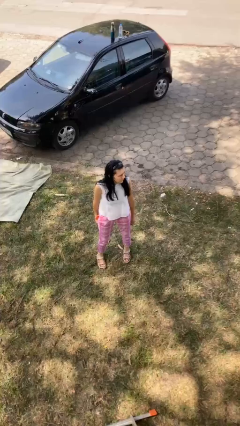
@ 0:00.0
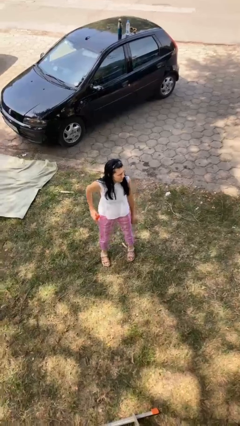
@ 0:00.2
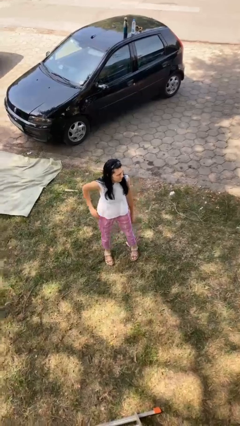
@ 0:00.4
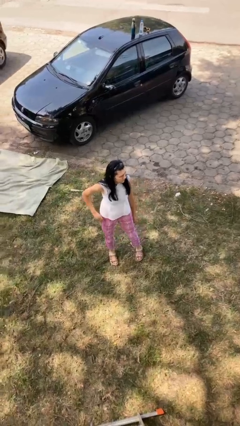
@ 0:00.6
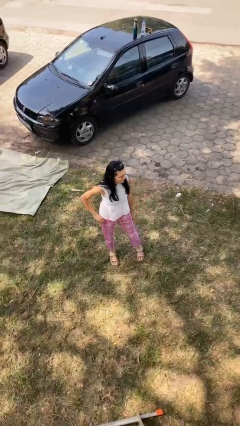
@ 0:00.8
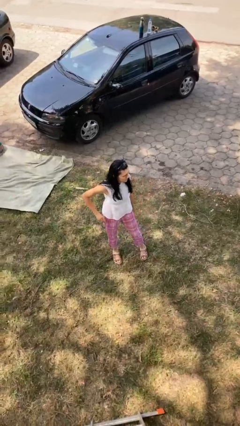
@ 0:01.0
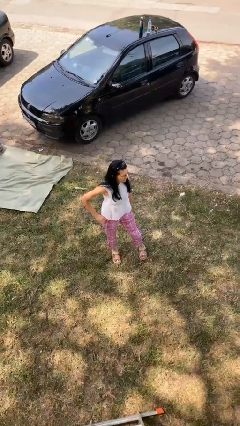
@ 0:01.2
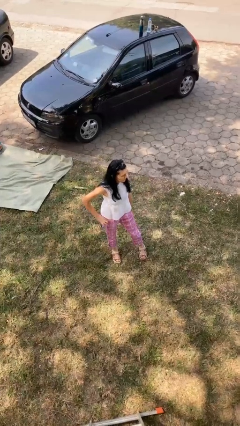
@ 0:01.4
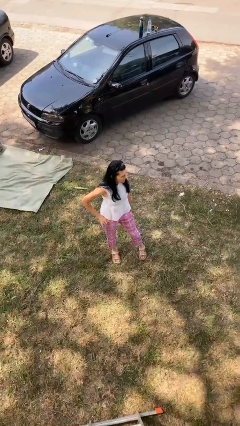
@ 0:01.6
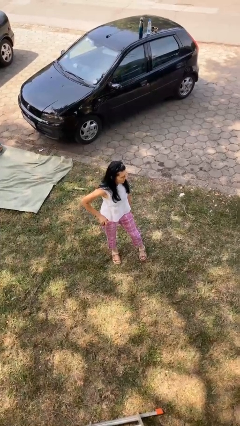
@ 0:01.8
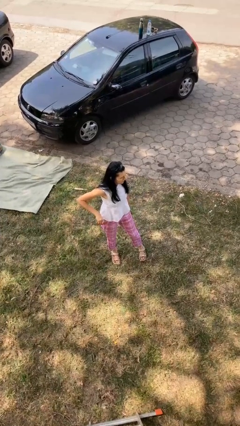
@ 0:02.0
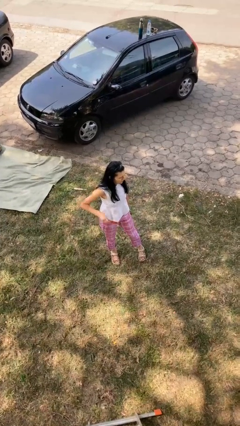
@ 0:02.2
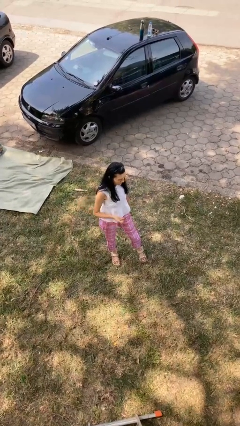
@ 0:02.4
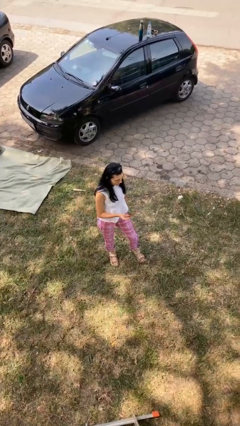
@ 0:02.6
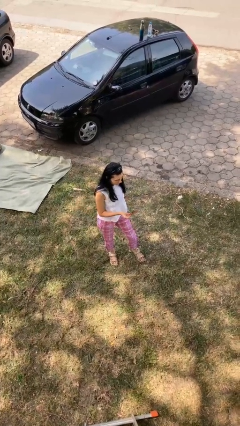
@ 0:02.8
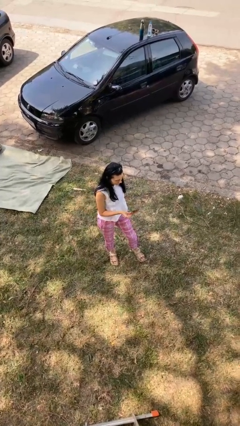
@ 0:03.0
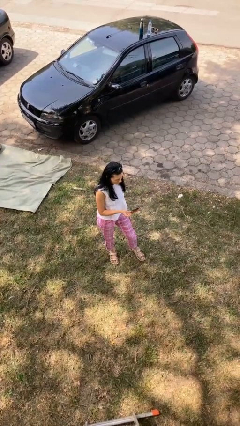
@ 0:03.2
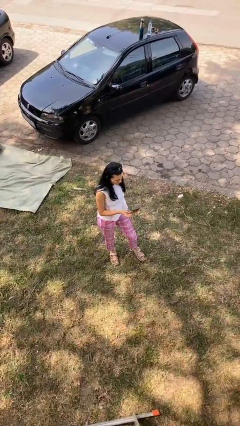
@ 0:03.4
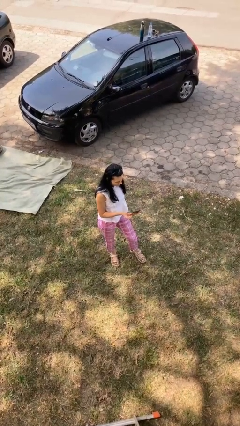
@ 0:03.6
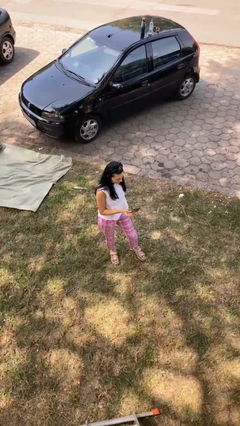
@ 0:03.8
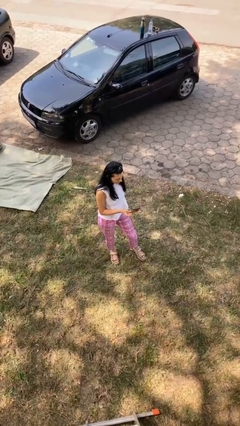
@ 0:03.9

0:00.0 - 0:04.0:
person takes phone from pocket

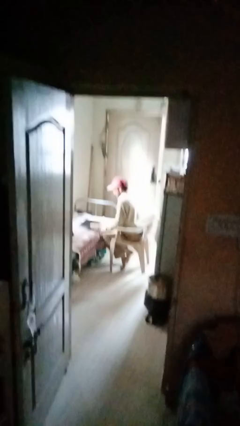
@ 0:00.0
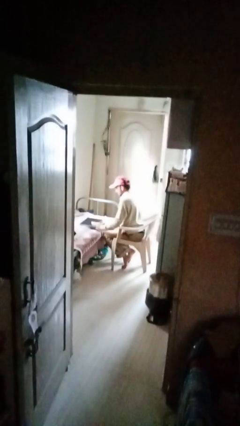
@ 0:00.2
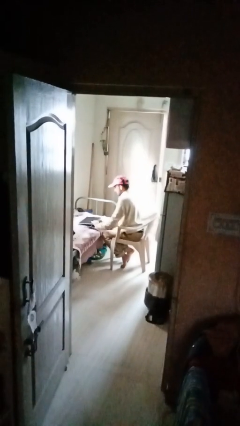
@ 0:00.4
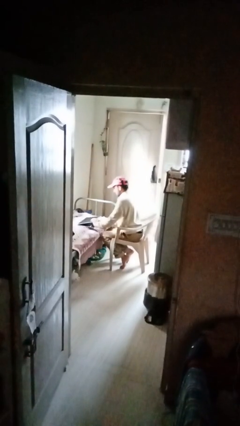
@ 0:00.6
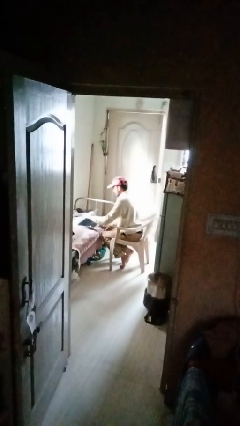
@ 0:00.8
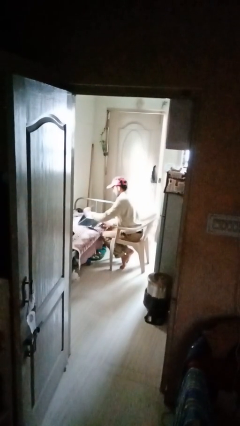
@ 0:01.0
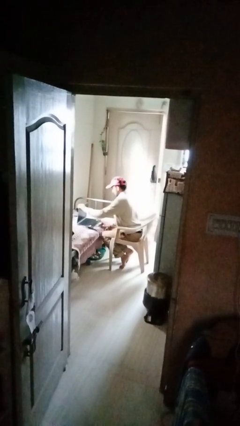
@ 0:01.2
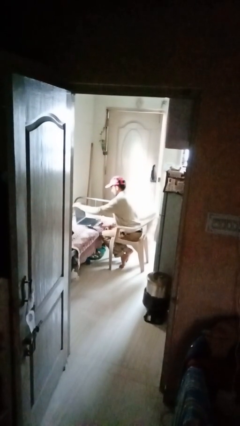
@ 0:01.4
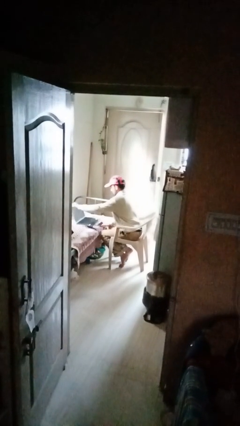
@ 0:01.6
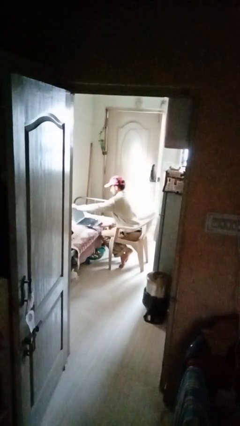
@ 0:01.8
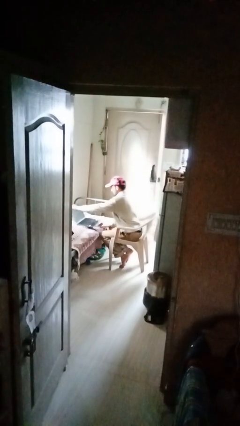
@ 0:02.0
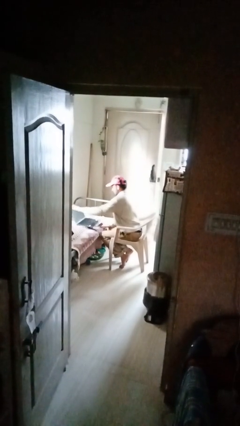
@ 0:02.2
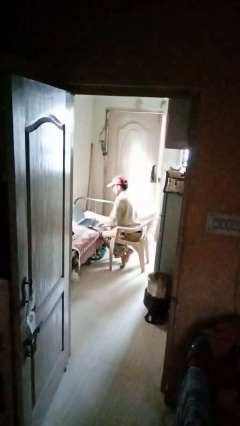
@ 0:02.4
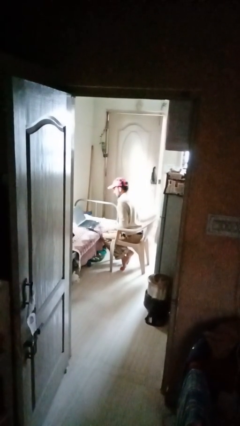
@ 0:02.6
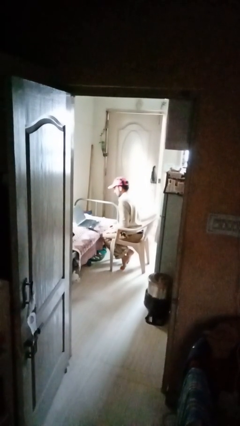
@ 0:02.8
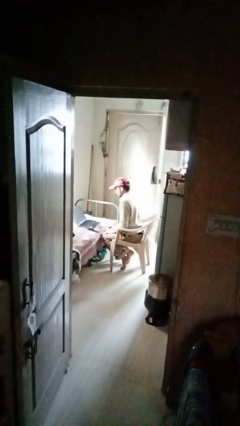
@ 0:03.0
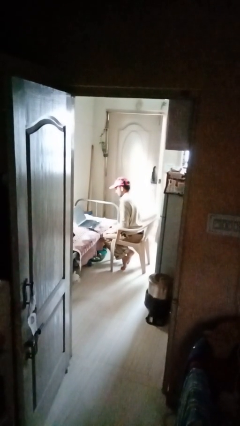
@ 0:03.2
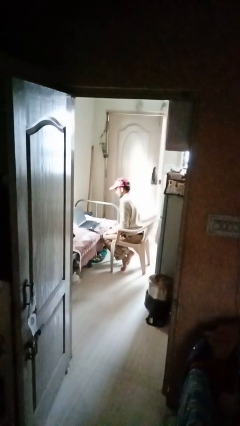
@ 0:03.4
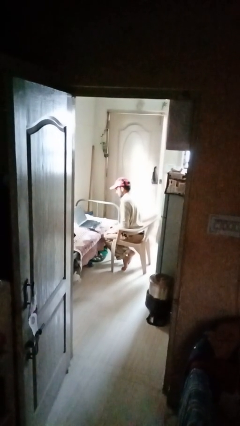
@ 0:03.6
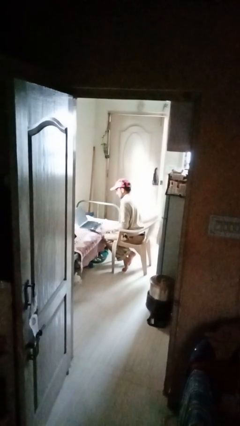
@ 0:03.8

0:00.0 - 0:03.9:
person opens laptop

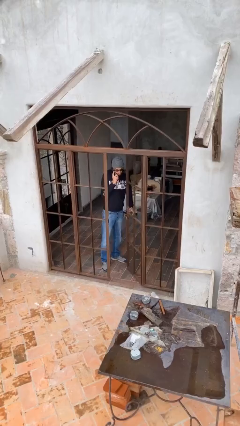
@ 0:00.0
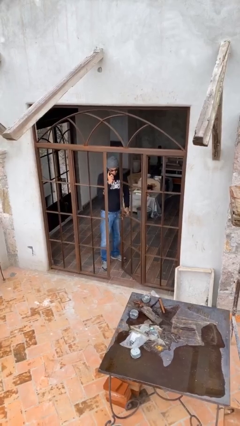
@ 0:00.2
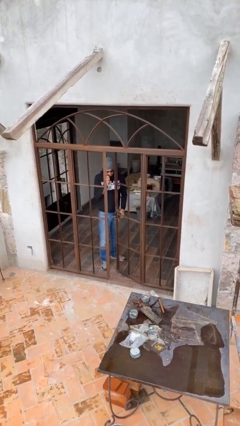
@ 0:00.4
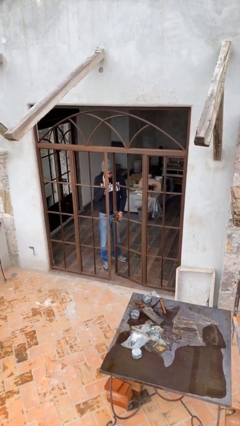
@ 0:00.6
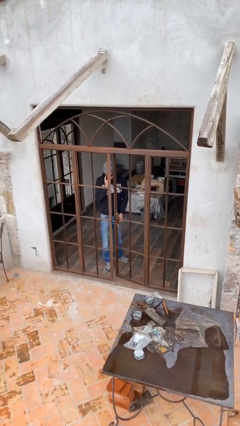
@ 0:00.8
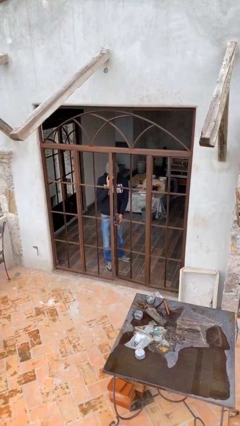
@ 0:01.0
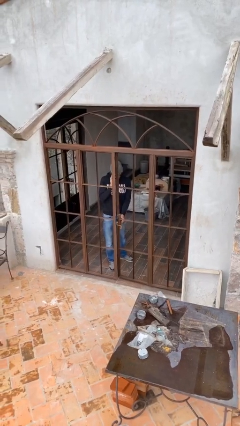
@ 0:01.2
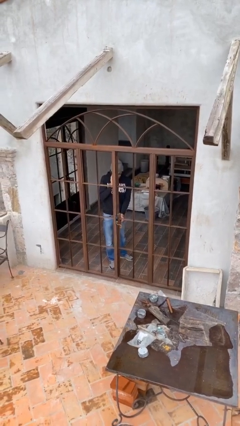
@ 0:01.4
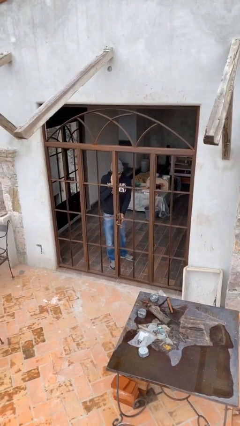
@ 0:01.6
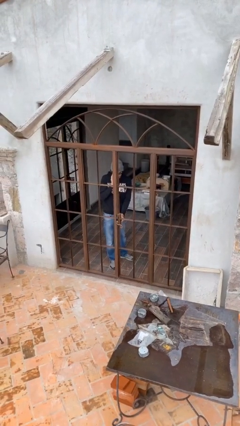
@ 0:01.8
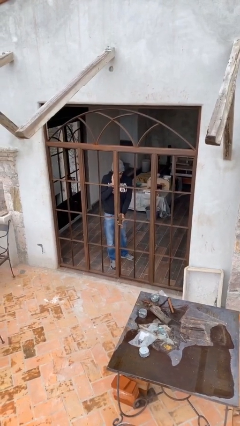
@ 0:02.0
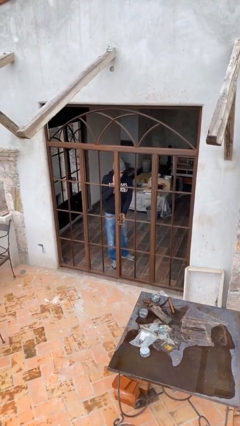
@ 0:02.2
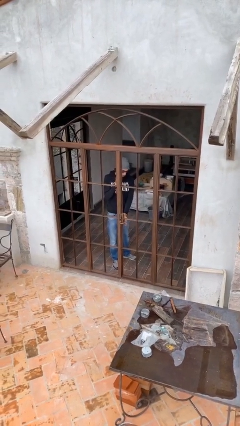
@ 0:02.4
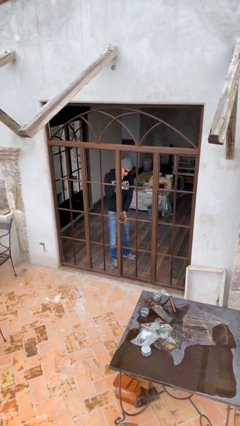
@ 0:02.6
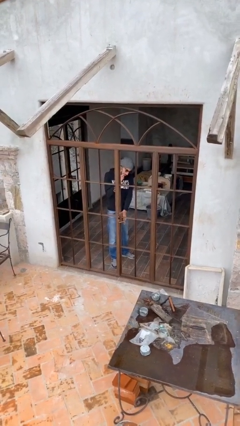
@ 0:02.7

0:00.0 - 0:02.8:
person closes facility door

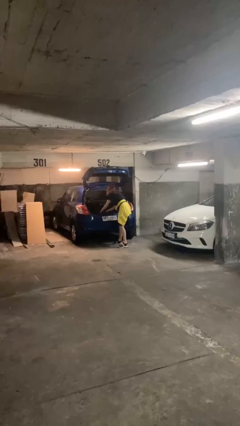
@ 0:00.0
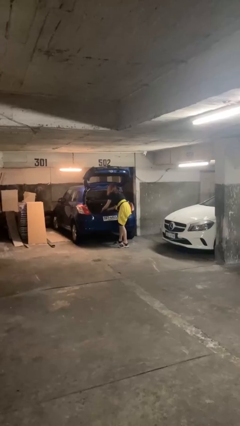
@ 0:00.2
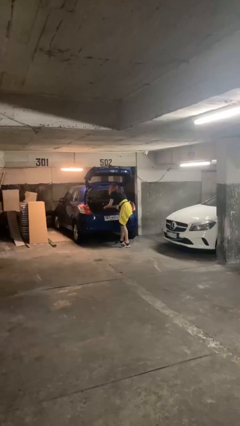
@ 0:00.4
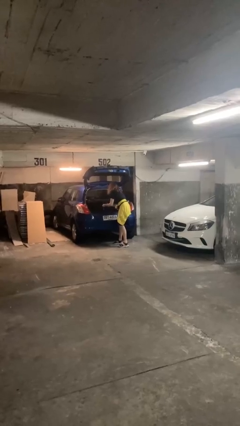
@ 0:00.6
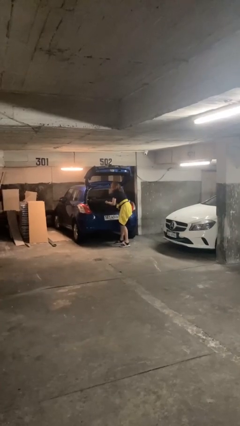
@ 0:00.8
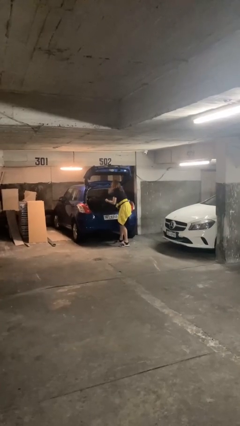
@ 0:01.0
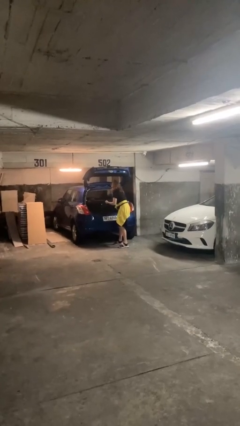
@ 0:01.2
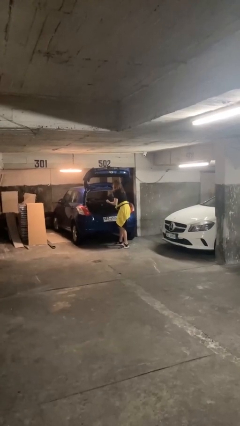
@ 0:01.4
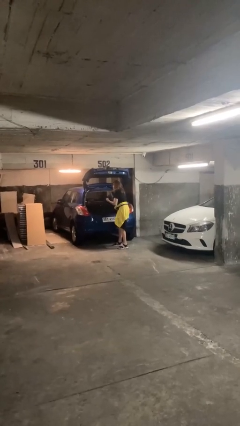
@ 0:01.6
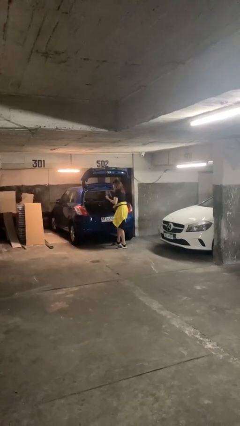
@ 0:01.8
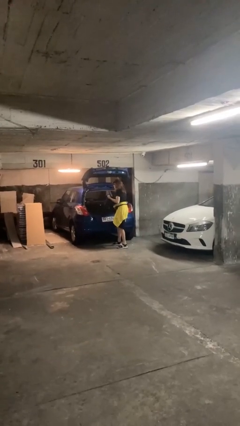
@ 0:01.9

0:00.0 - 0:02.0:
person unloads car

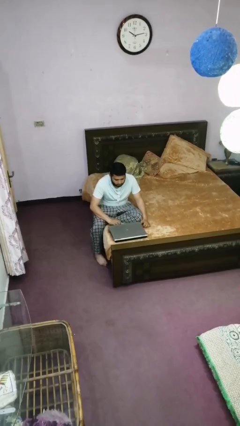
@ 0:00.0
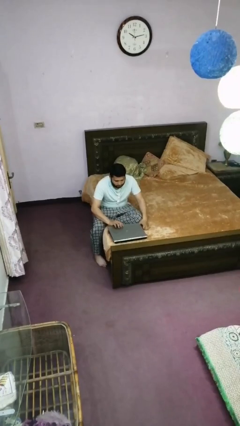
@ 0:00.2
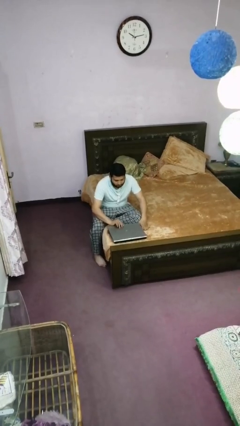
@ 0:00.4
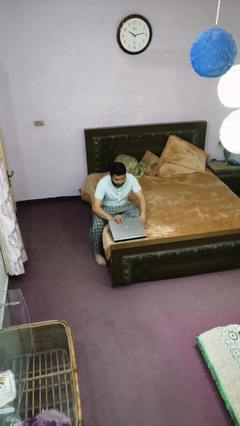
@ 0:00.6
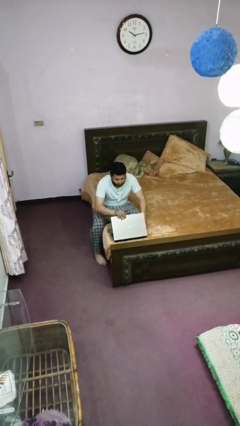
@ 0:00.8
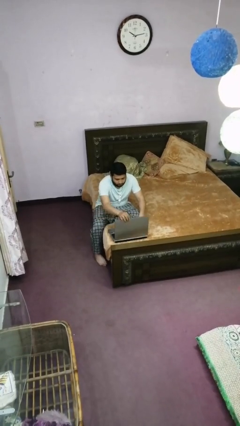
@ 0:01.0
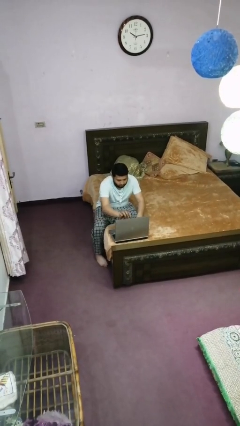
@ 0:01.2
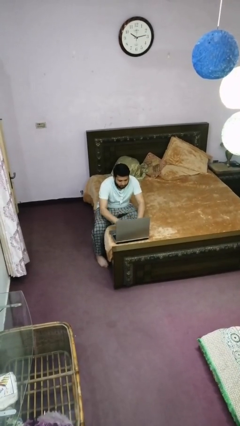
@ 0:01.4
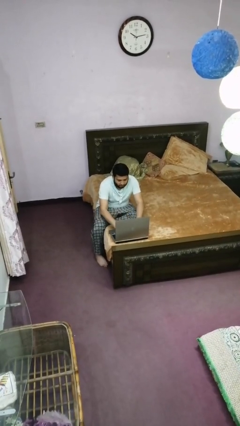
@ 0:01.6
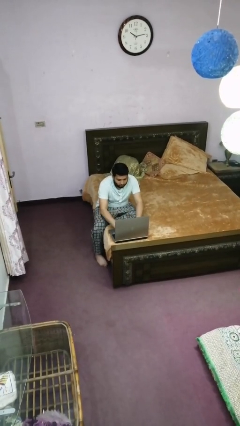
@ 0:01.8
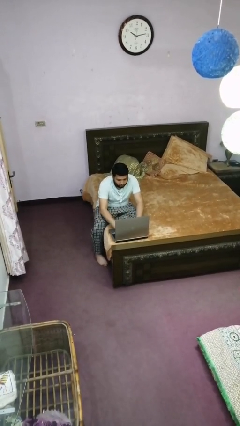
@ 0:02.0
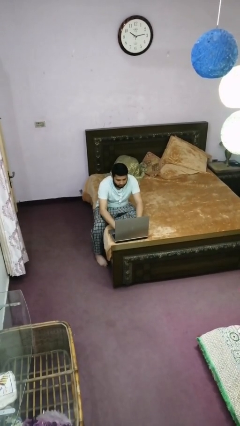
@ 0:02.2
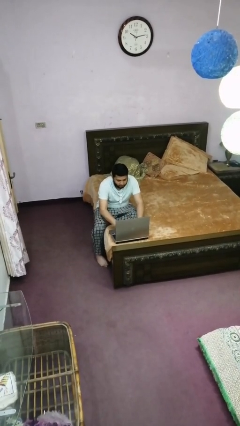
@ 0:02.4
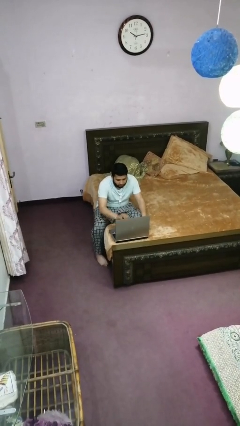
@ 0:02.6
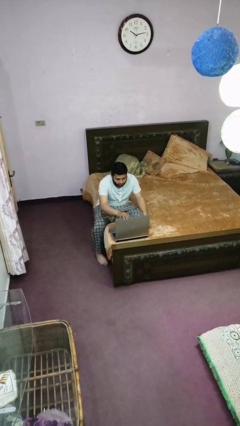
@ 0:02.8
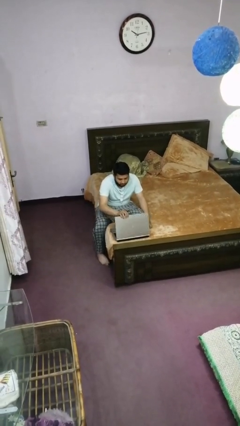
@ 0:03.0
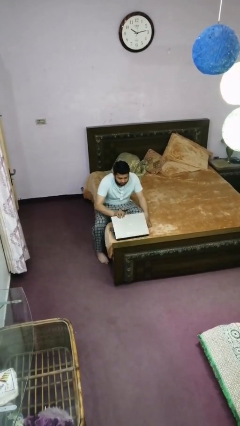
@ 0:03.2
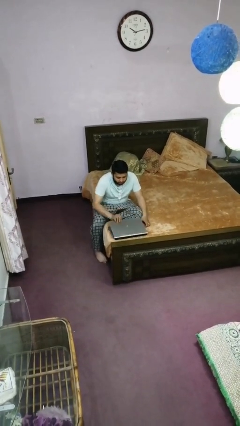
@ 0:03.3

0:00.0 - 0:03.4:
person interacts with laptop

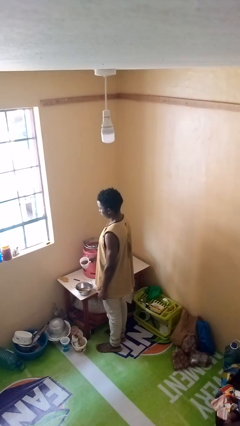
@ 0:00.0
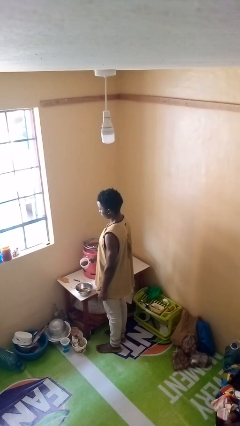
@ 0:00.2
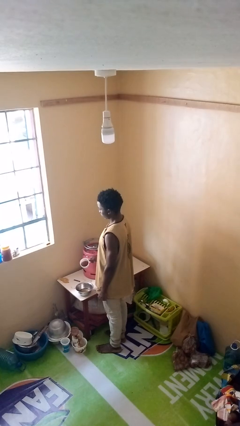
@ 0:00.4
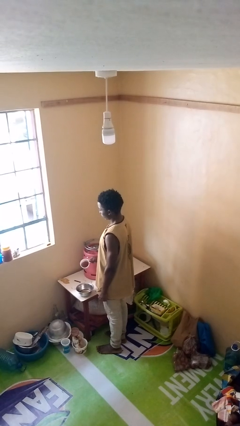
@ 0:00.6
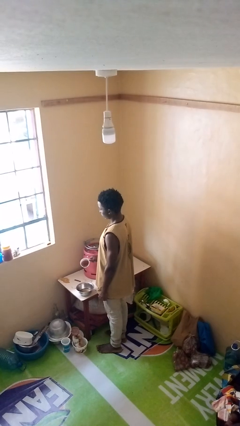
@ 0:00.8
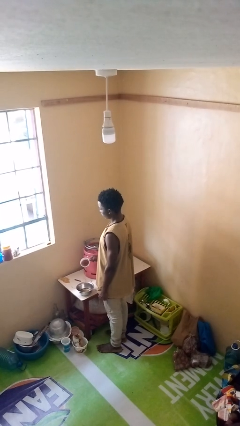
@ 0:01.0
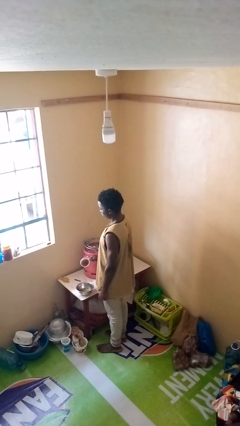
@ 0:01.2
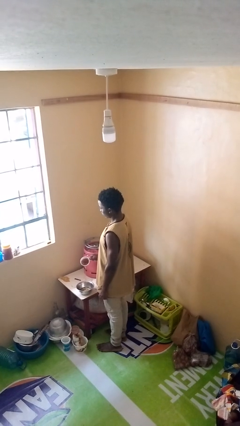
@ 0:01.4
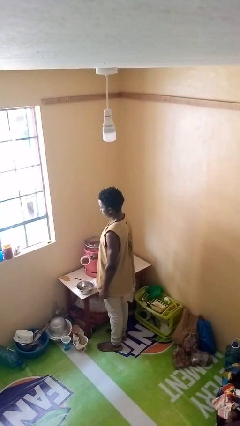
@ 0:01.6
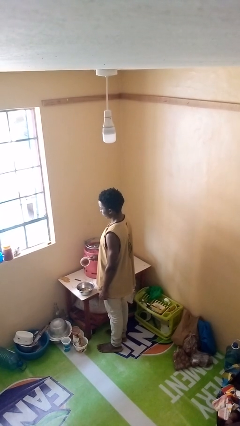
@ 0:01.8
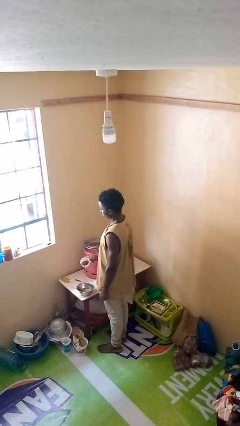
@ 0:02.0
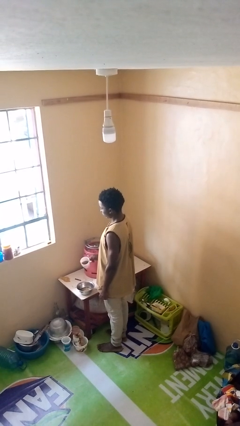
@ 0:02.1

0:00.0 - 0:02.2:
person pours into bowl
